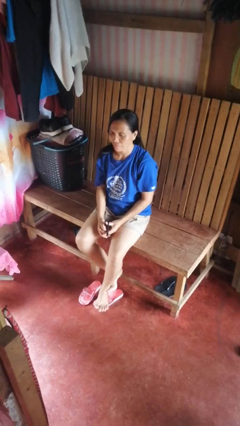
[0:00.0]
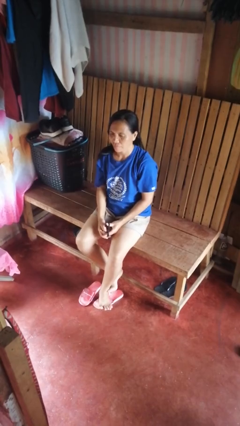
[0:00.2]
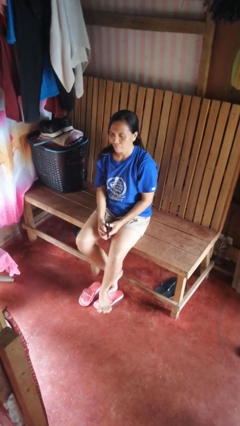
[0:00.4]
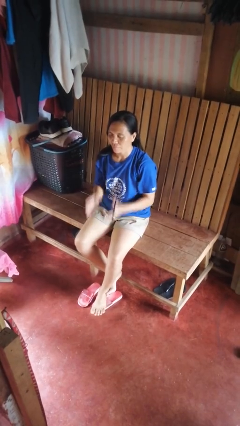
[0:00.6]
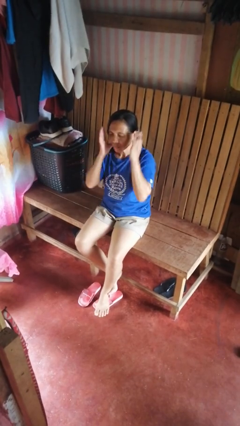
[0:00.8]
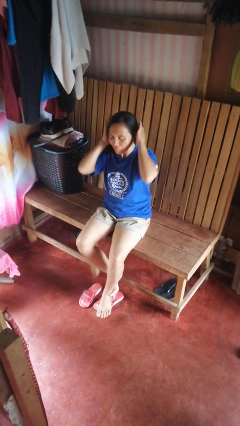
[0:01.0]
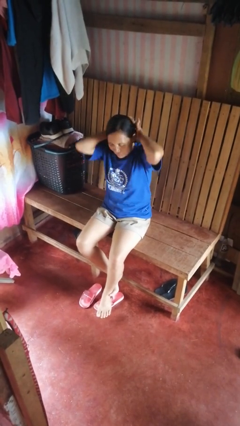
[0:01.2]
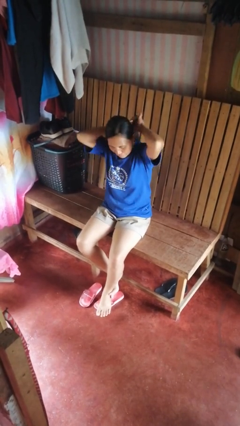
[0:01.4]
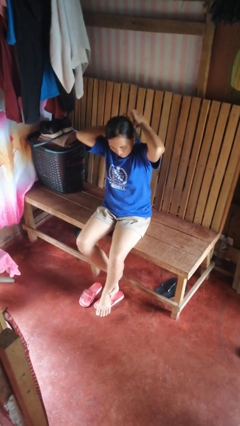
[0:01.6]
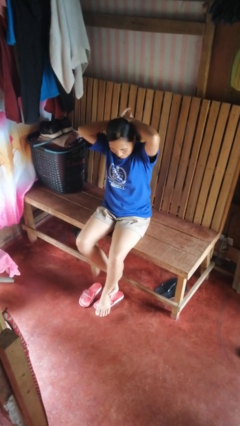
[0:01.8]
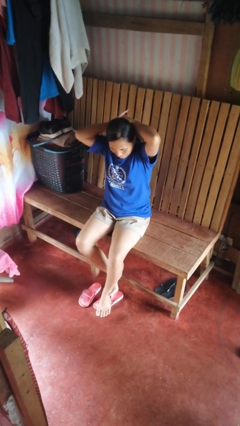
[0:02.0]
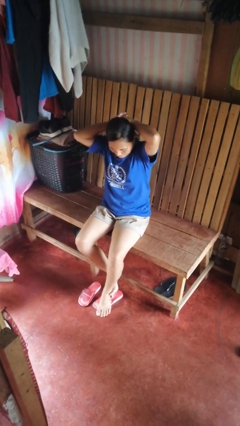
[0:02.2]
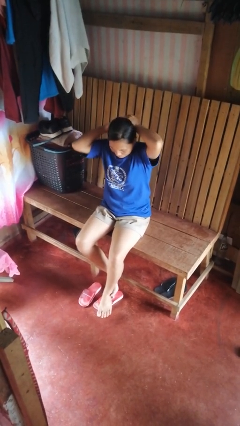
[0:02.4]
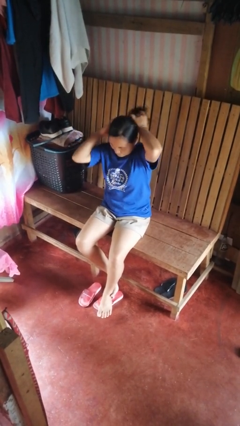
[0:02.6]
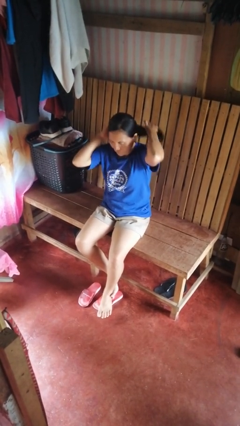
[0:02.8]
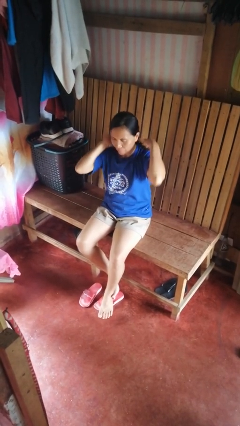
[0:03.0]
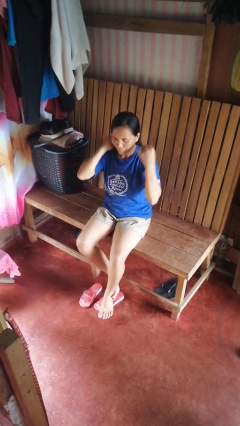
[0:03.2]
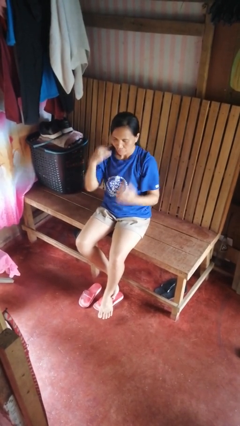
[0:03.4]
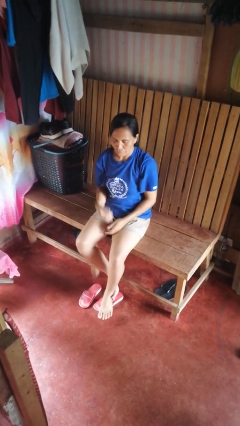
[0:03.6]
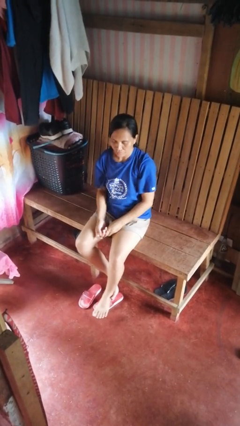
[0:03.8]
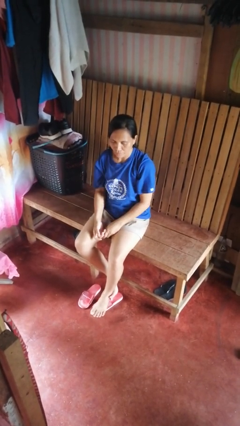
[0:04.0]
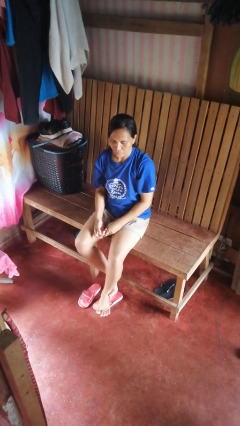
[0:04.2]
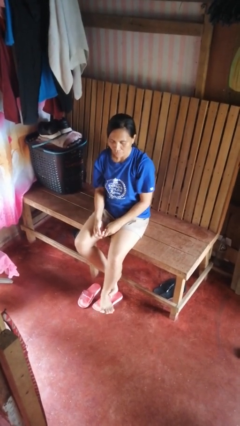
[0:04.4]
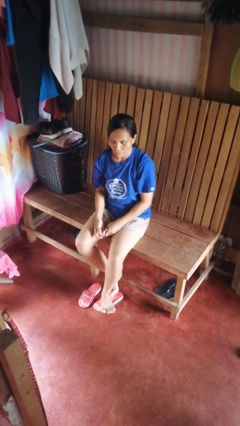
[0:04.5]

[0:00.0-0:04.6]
person puts hair in ponytail

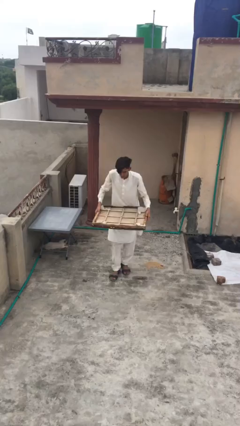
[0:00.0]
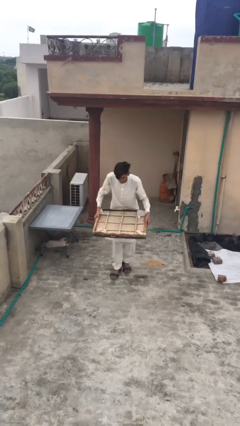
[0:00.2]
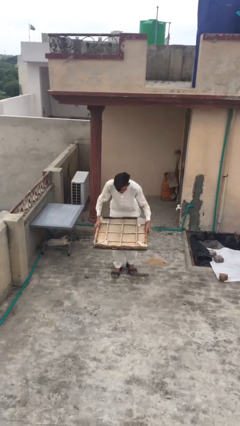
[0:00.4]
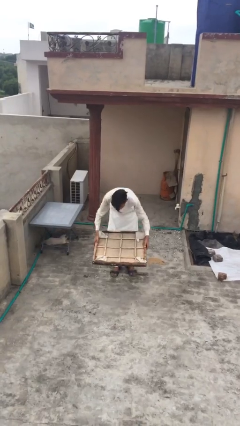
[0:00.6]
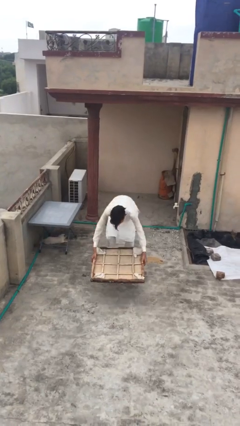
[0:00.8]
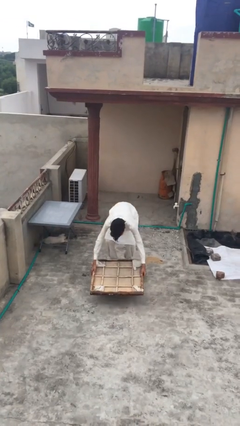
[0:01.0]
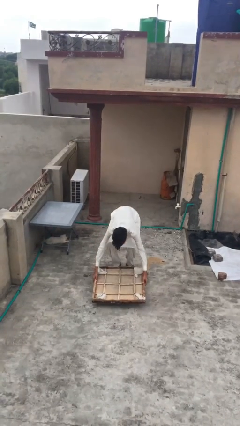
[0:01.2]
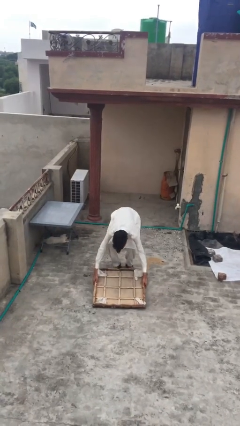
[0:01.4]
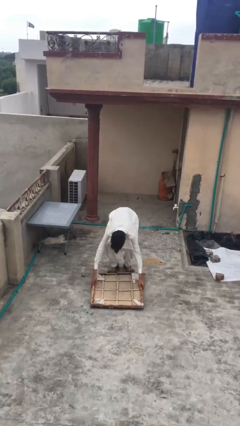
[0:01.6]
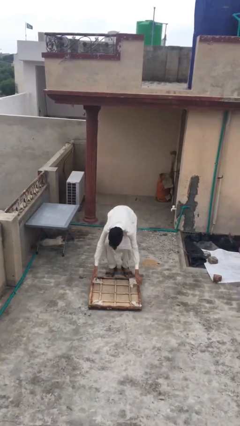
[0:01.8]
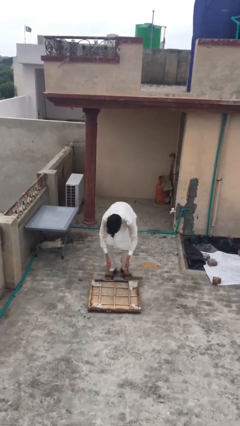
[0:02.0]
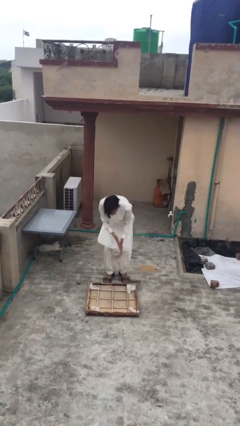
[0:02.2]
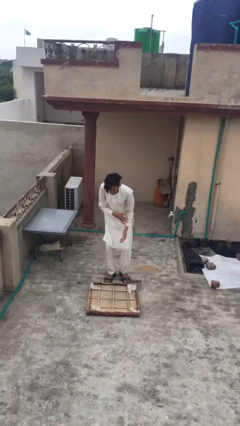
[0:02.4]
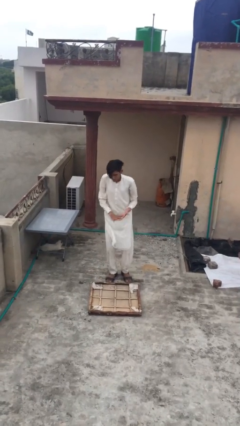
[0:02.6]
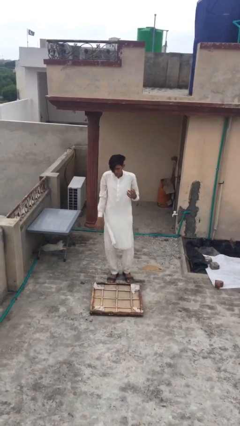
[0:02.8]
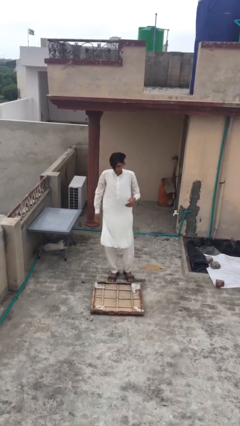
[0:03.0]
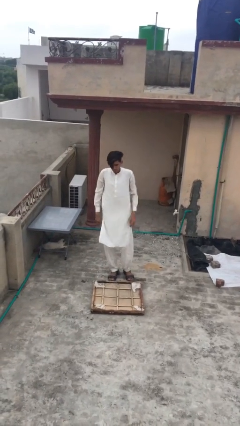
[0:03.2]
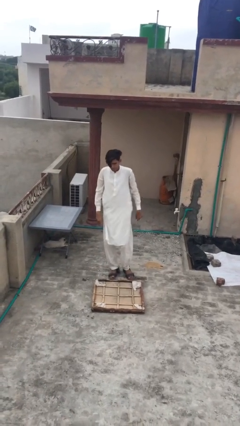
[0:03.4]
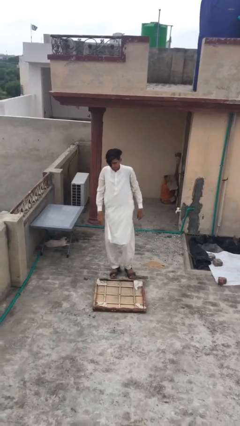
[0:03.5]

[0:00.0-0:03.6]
person puts down object on floor

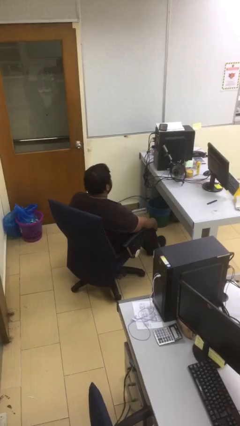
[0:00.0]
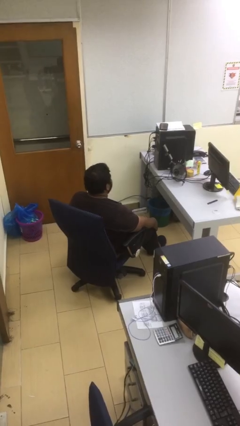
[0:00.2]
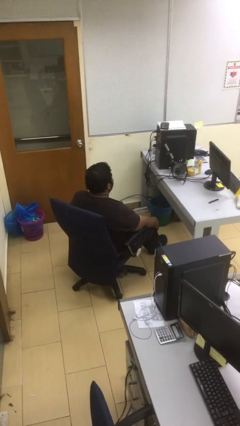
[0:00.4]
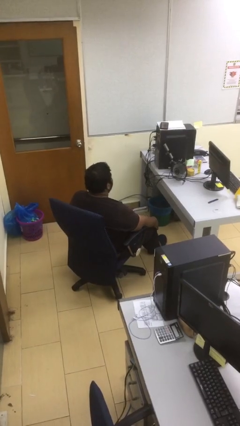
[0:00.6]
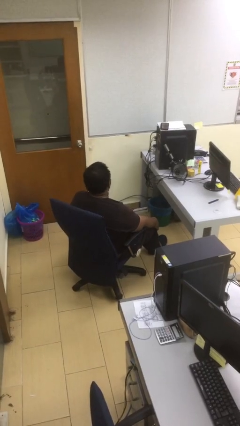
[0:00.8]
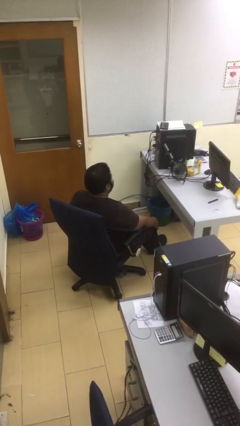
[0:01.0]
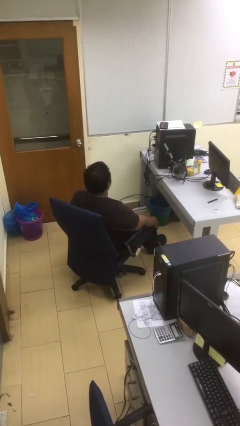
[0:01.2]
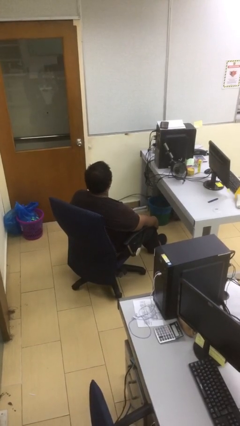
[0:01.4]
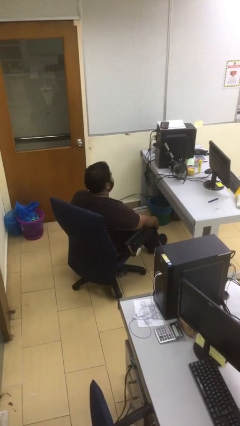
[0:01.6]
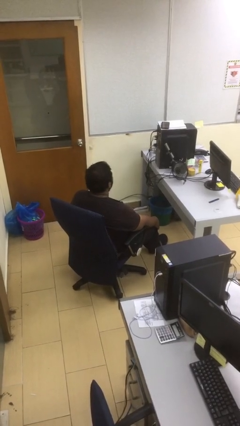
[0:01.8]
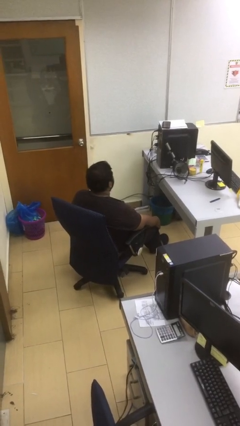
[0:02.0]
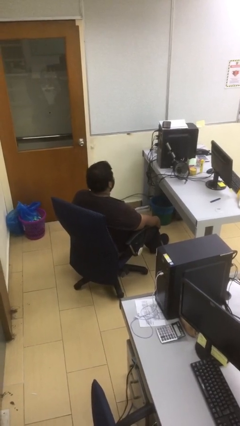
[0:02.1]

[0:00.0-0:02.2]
person shakes head

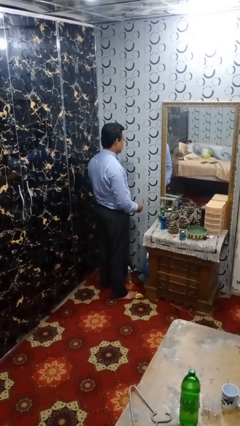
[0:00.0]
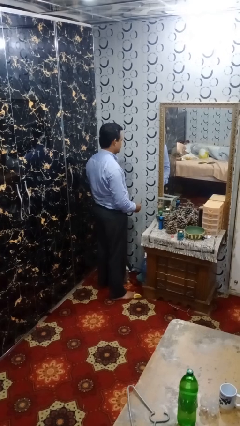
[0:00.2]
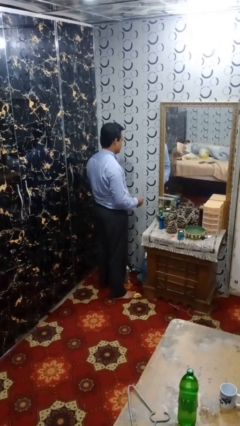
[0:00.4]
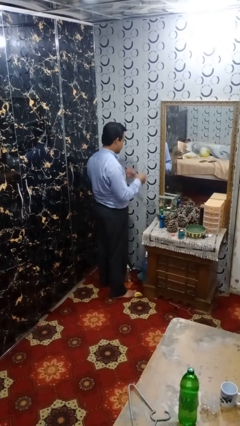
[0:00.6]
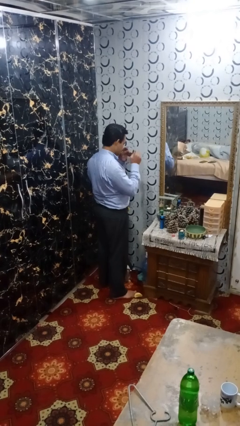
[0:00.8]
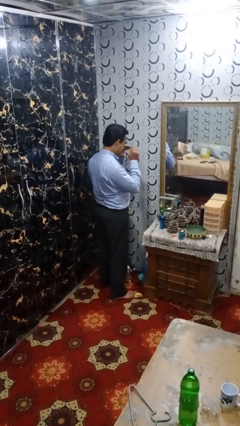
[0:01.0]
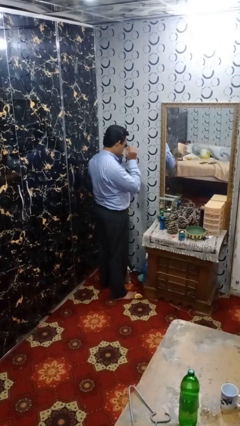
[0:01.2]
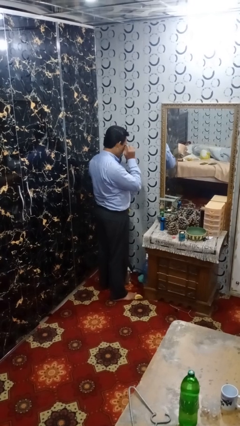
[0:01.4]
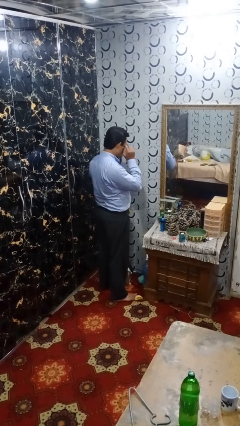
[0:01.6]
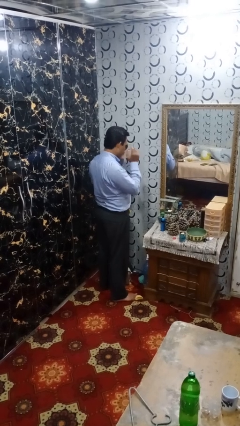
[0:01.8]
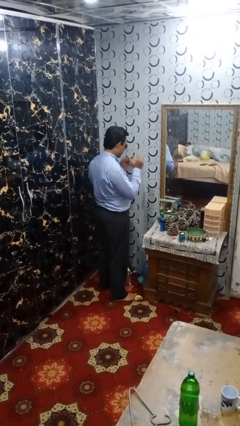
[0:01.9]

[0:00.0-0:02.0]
person puts on sunglasses

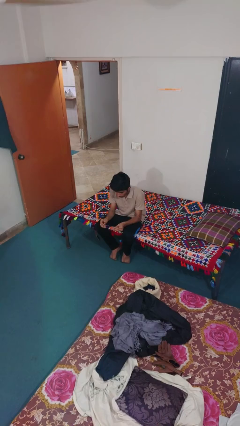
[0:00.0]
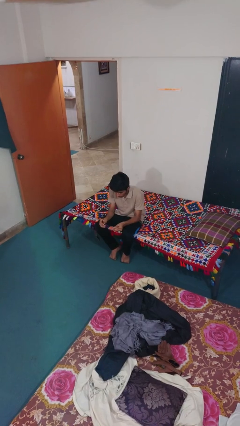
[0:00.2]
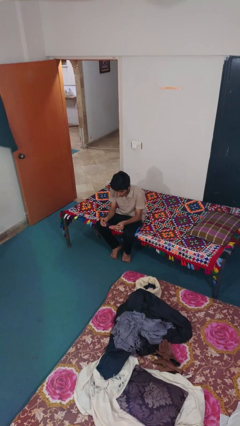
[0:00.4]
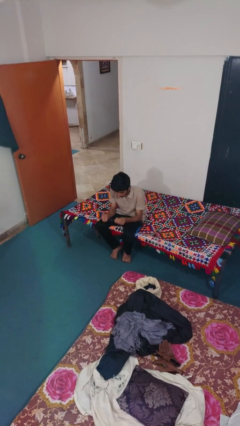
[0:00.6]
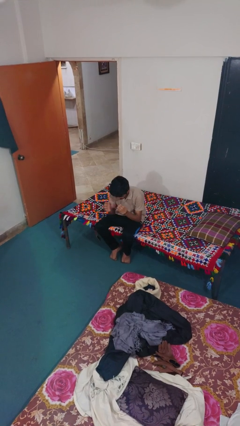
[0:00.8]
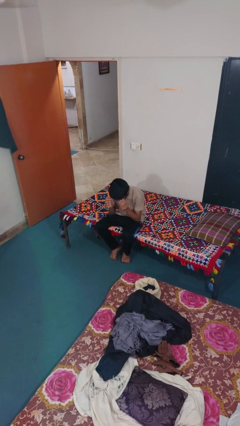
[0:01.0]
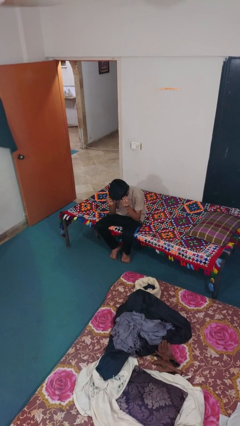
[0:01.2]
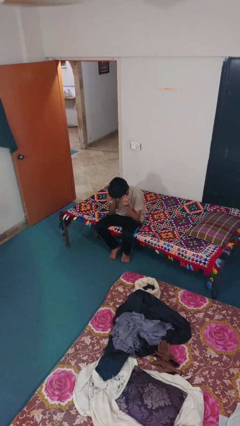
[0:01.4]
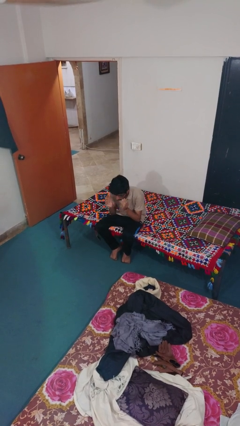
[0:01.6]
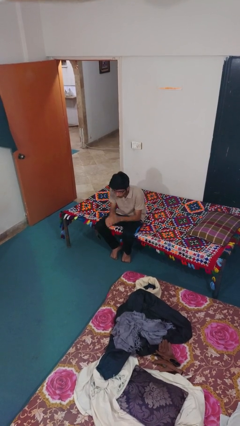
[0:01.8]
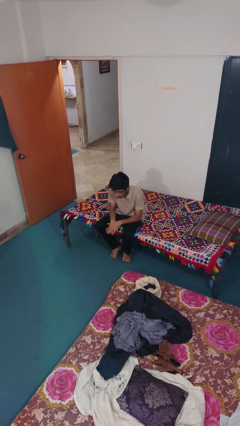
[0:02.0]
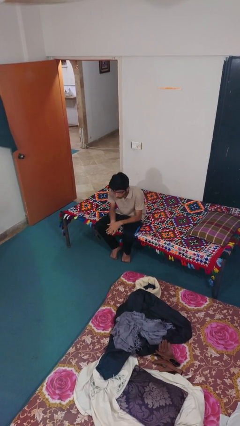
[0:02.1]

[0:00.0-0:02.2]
person puts on glasses

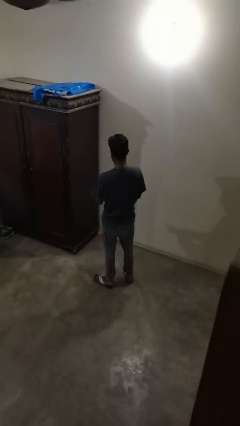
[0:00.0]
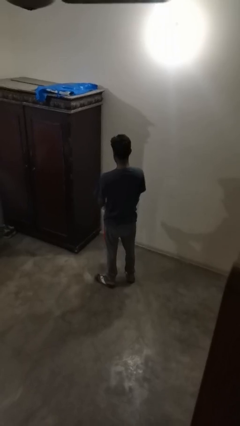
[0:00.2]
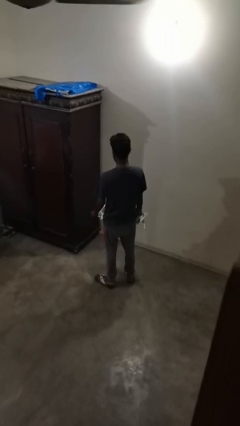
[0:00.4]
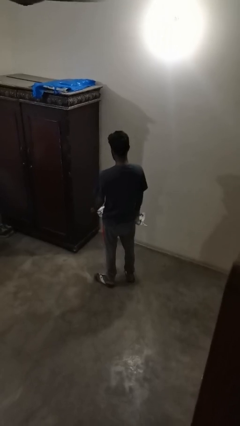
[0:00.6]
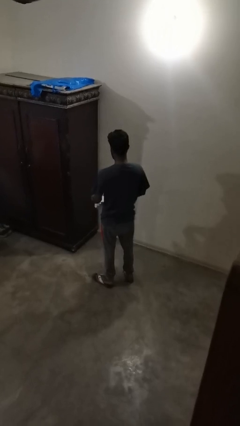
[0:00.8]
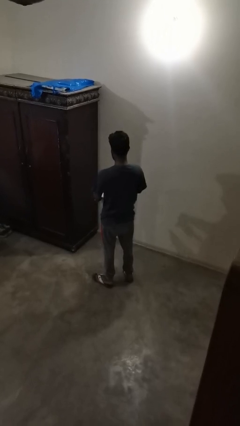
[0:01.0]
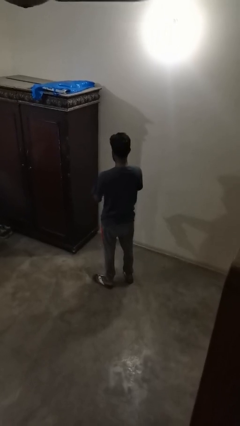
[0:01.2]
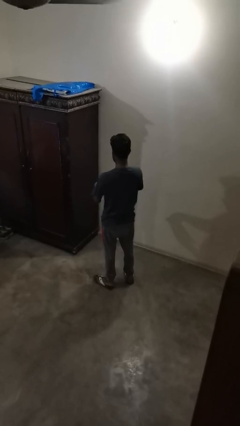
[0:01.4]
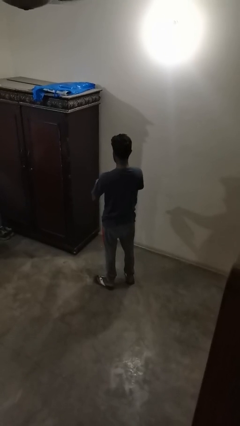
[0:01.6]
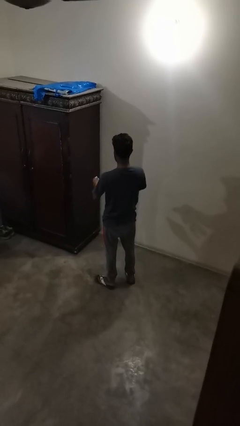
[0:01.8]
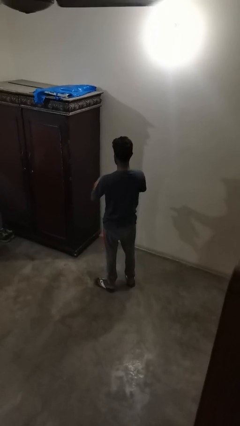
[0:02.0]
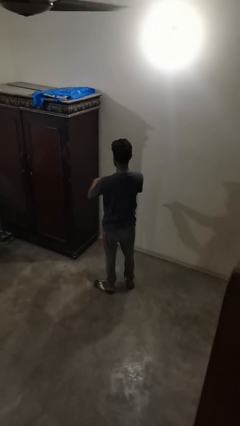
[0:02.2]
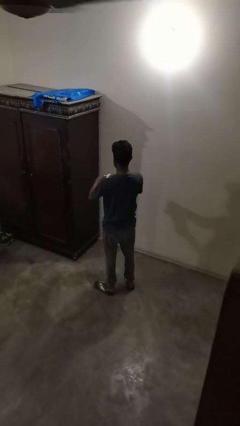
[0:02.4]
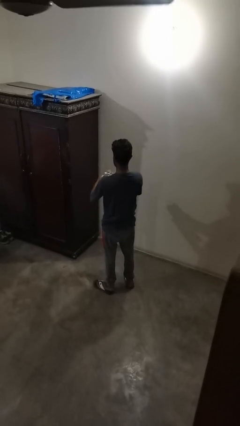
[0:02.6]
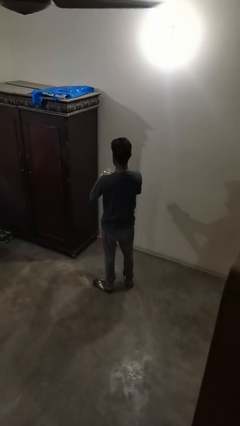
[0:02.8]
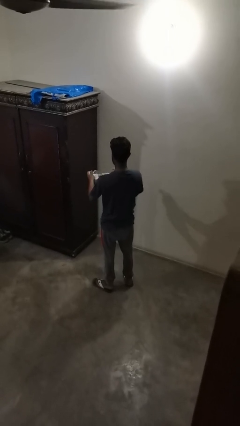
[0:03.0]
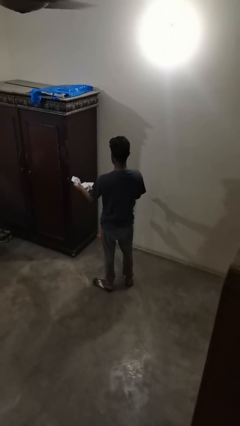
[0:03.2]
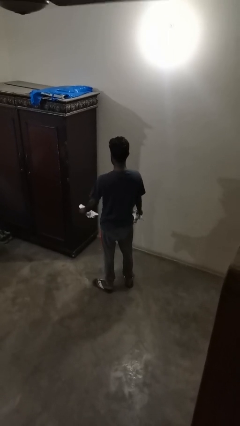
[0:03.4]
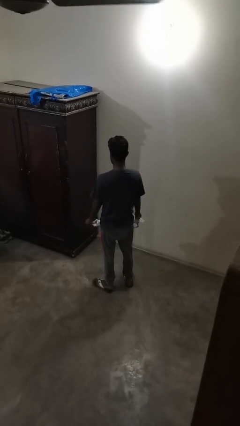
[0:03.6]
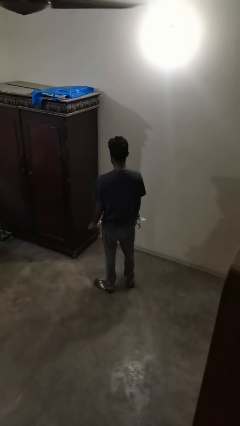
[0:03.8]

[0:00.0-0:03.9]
person tears paper
